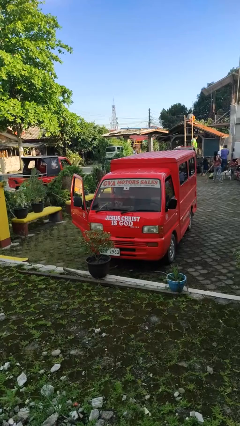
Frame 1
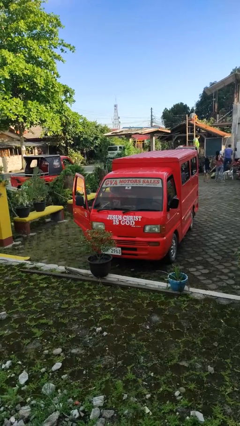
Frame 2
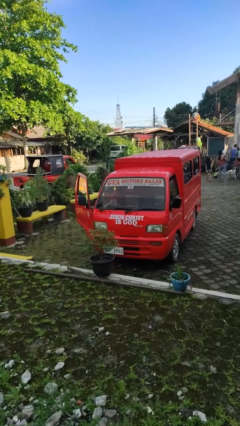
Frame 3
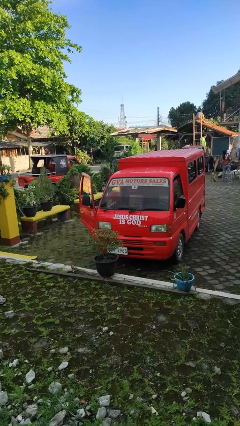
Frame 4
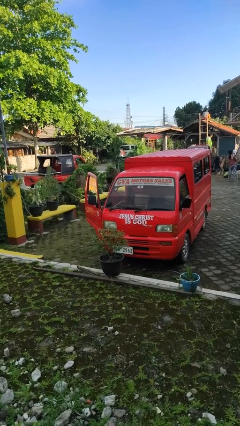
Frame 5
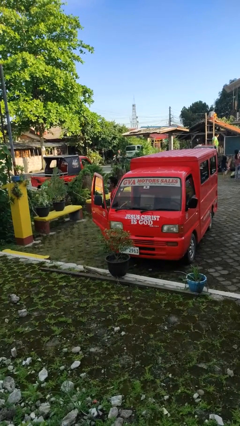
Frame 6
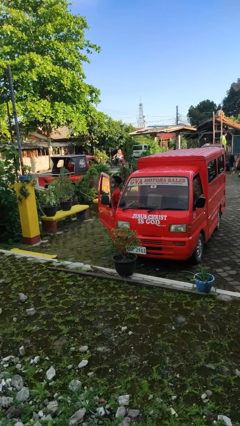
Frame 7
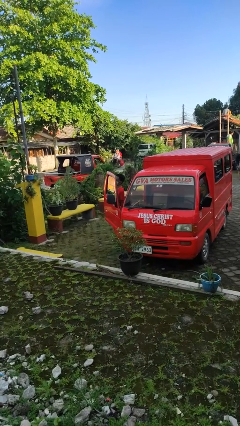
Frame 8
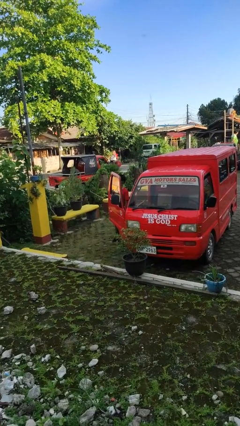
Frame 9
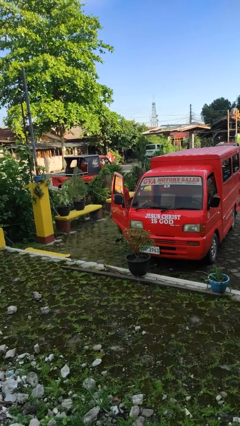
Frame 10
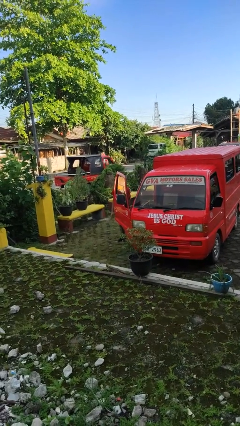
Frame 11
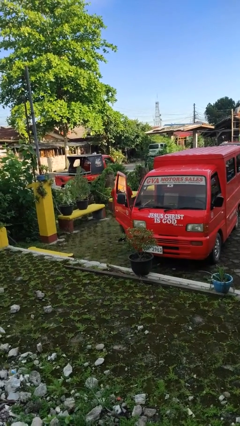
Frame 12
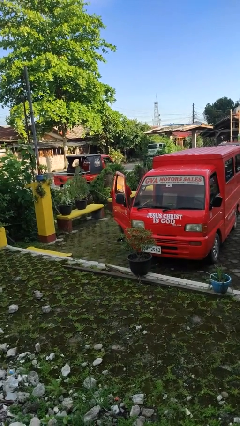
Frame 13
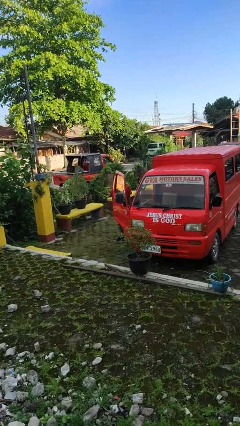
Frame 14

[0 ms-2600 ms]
person exits car

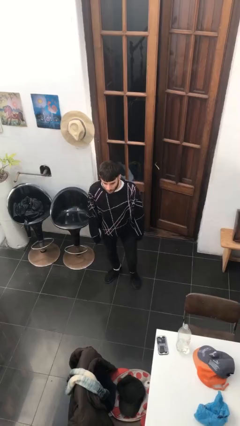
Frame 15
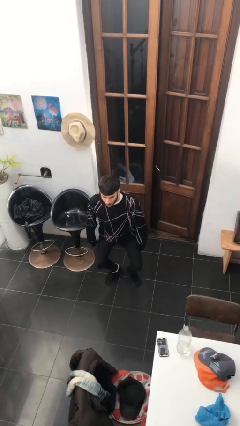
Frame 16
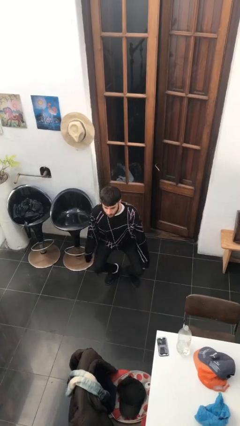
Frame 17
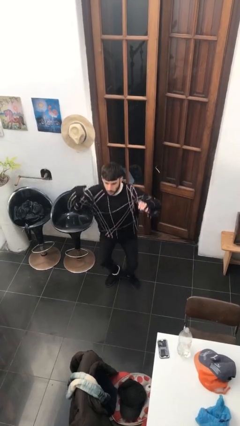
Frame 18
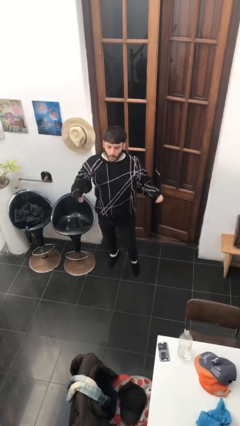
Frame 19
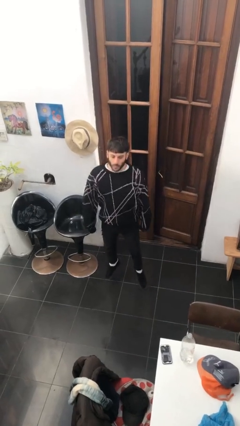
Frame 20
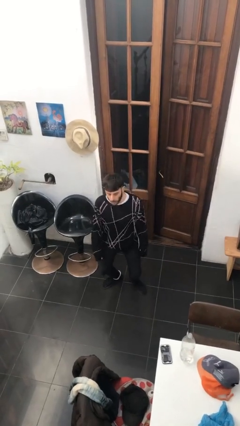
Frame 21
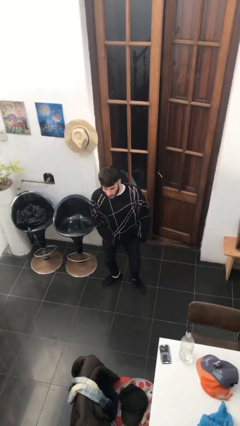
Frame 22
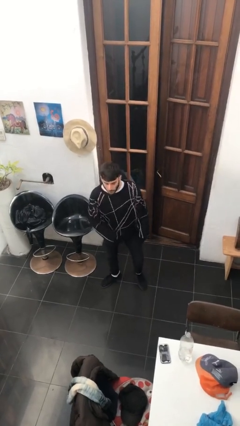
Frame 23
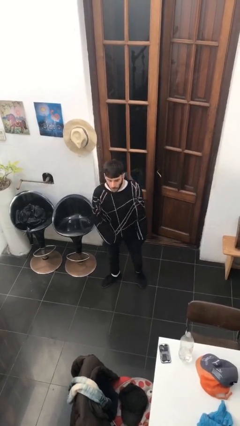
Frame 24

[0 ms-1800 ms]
person jumps

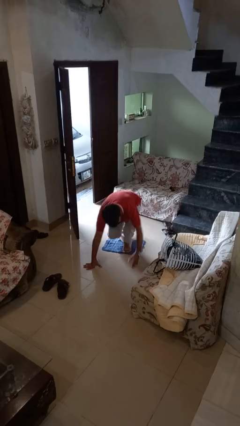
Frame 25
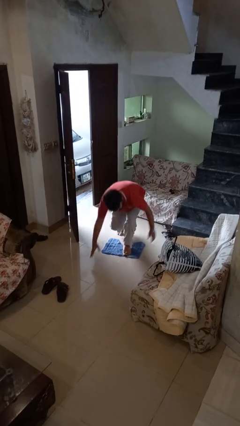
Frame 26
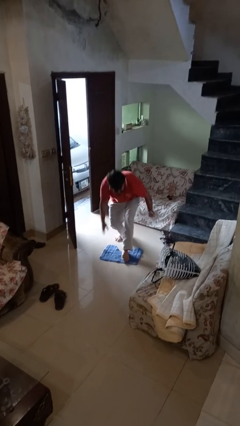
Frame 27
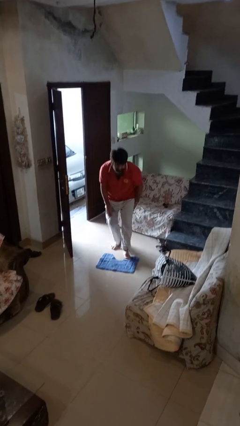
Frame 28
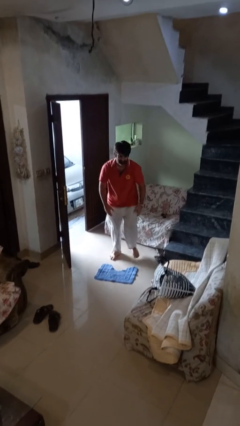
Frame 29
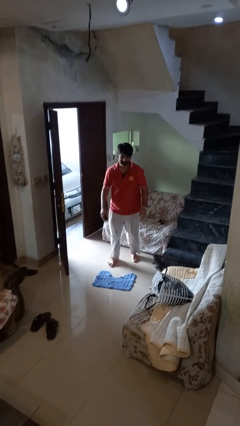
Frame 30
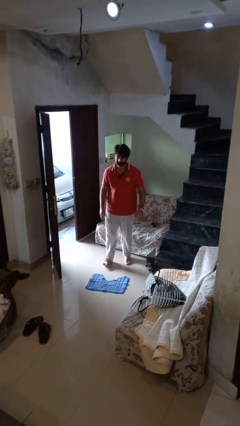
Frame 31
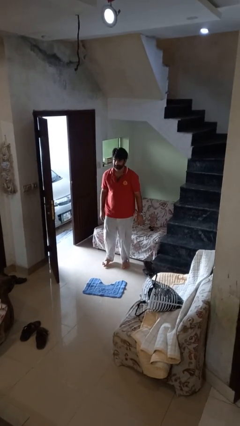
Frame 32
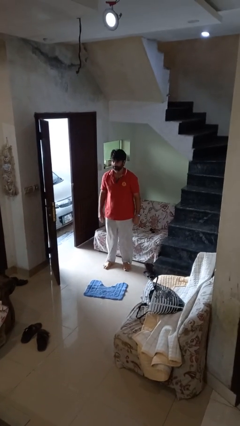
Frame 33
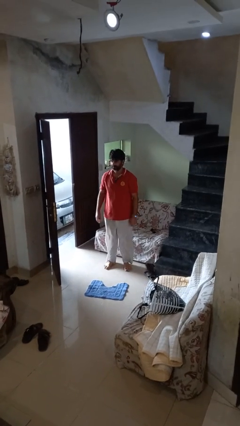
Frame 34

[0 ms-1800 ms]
person stands up from floor

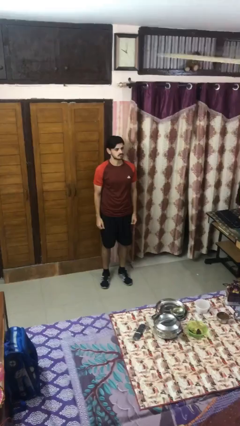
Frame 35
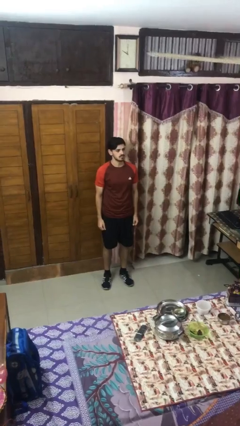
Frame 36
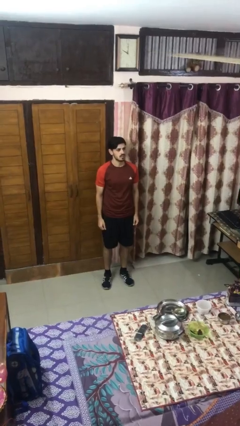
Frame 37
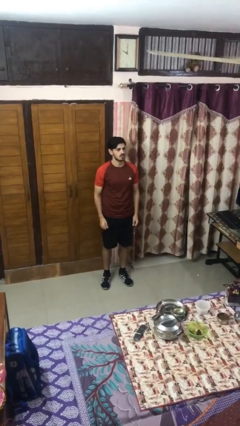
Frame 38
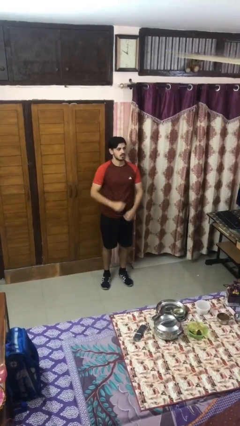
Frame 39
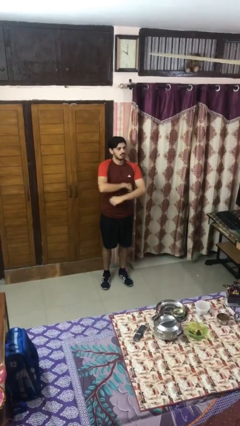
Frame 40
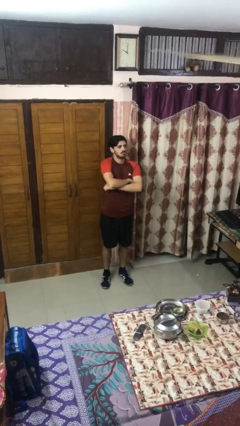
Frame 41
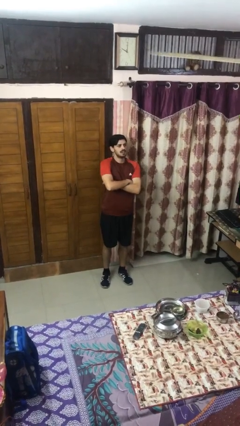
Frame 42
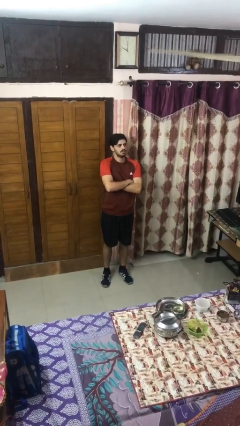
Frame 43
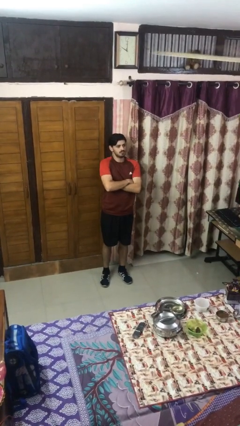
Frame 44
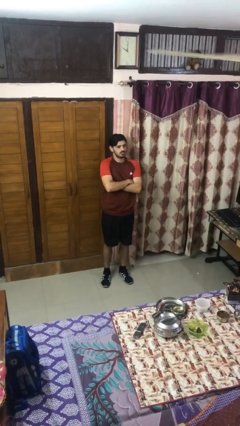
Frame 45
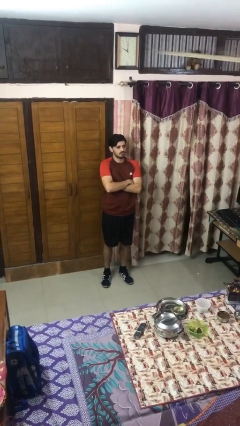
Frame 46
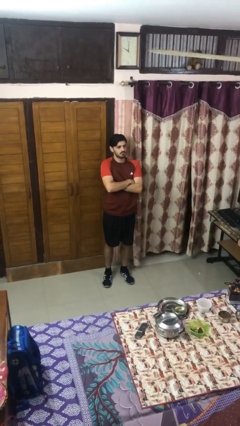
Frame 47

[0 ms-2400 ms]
person crosses arms

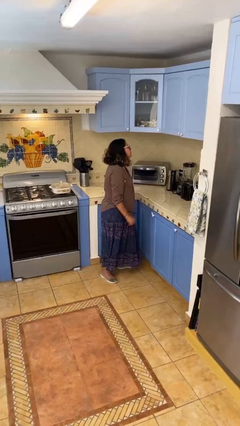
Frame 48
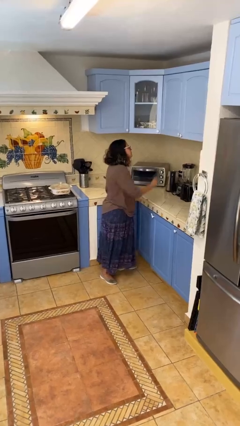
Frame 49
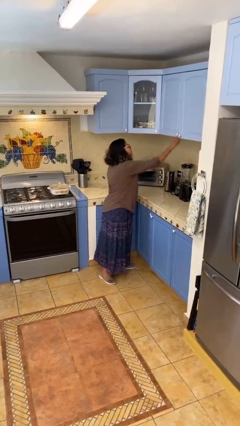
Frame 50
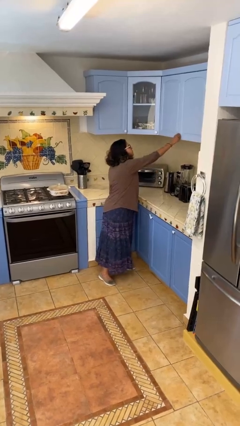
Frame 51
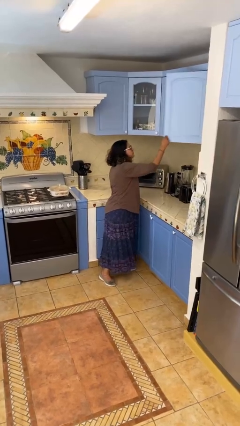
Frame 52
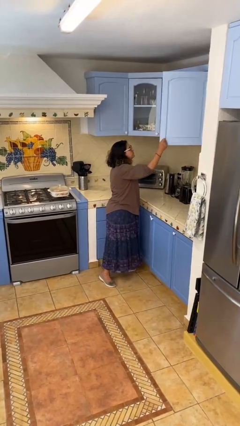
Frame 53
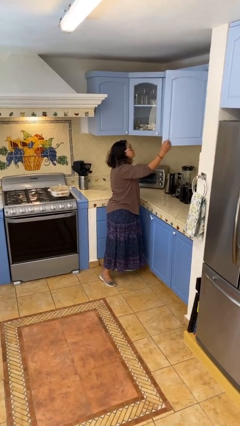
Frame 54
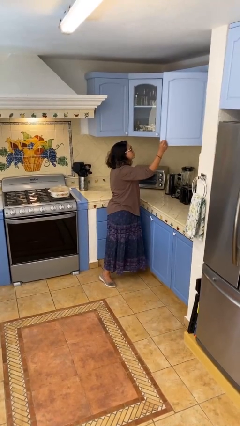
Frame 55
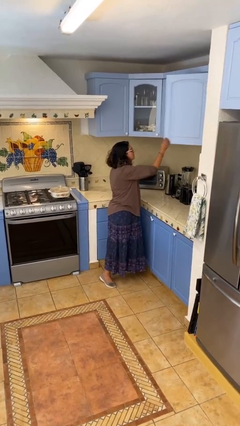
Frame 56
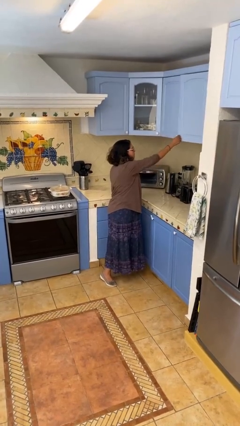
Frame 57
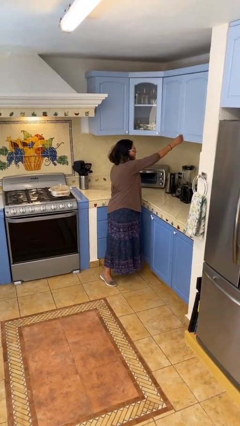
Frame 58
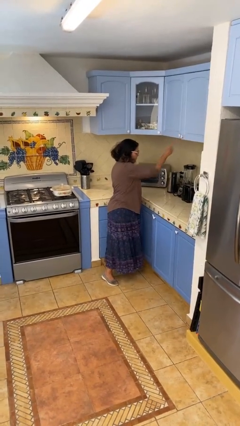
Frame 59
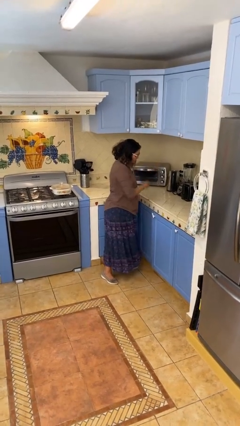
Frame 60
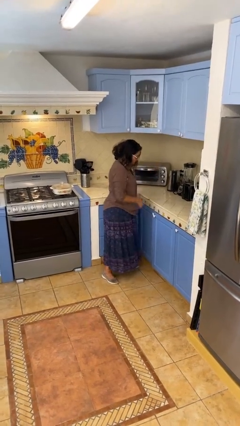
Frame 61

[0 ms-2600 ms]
person closes cabinet

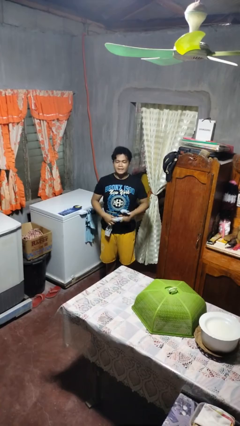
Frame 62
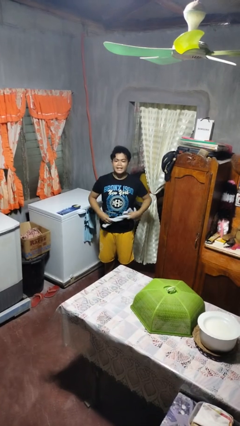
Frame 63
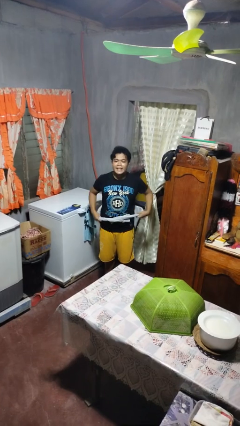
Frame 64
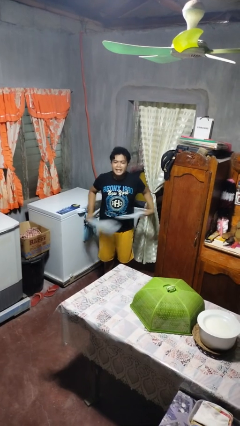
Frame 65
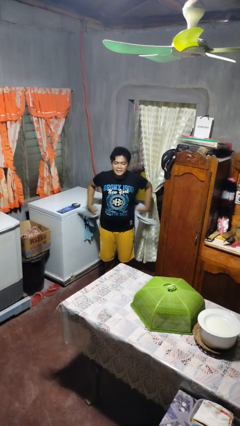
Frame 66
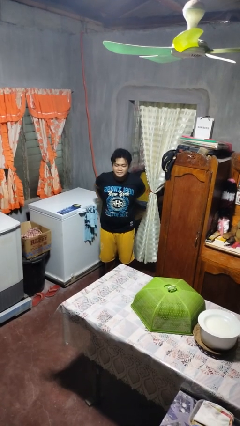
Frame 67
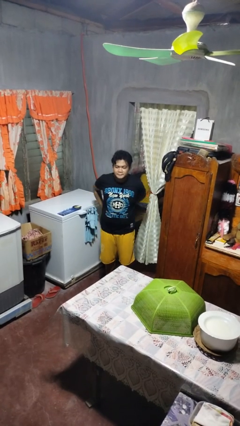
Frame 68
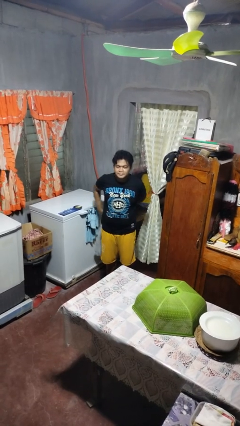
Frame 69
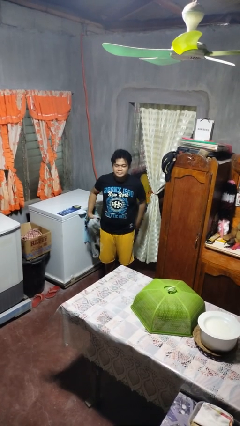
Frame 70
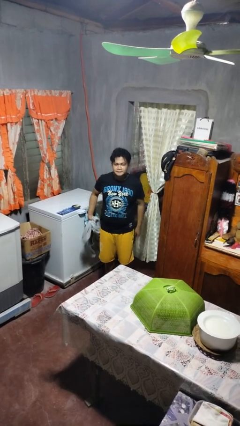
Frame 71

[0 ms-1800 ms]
person unties jacket around waist

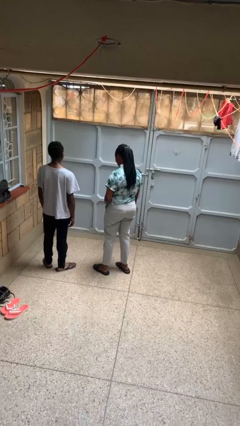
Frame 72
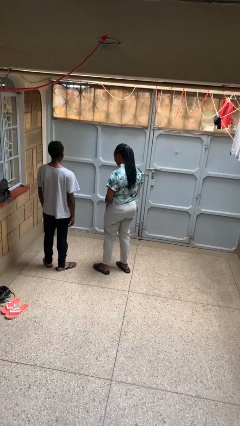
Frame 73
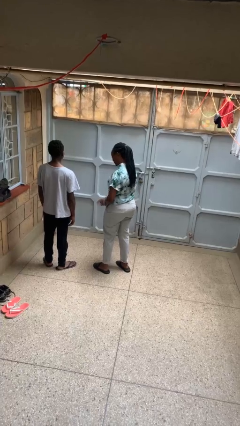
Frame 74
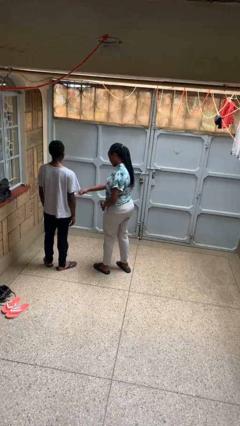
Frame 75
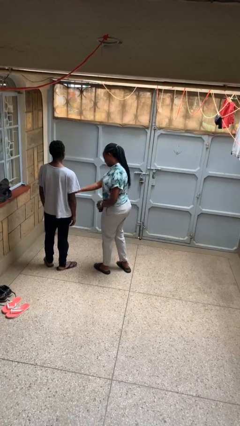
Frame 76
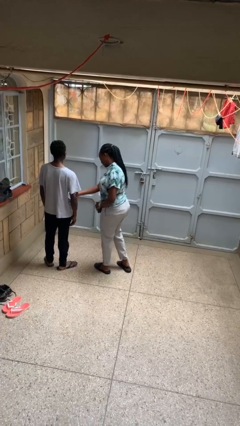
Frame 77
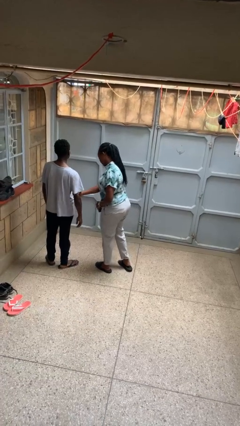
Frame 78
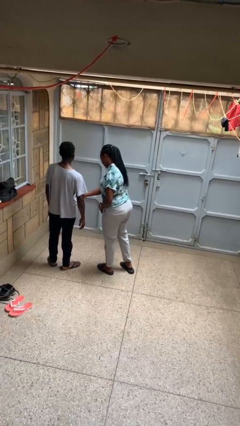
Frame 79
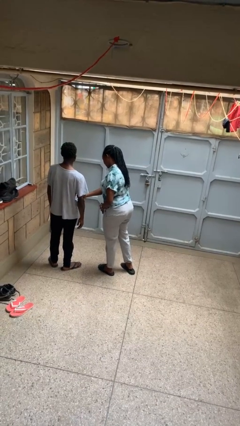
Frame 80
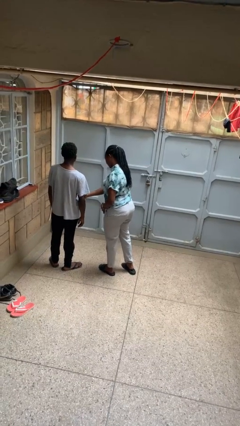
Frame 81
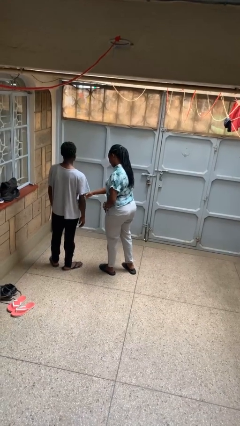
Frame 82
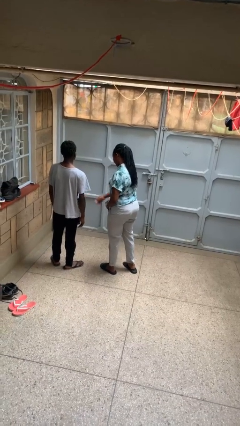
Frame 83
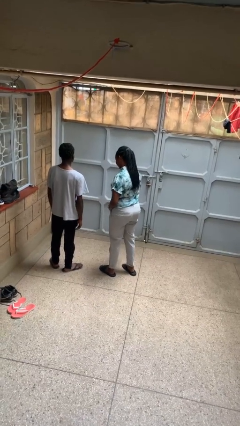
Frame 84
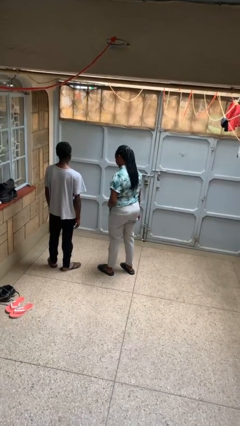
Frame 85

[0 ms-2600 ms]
person grabs person by bicep

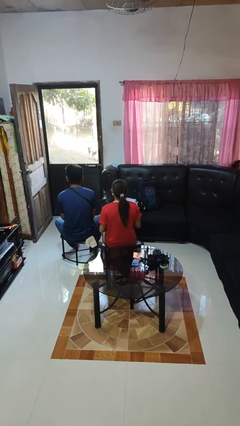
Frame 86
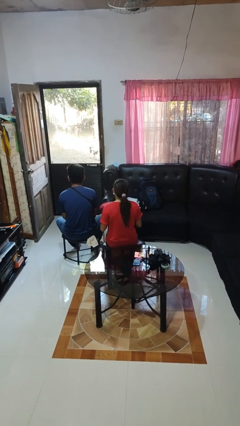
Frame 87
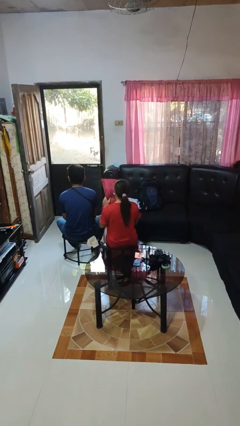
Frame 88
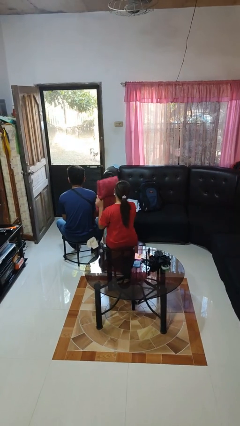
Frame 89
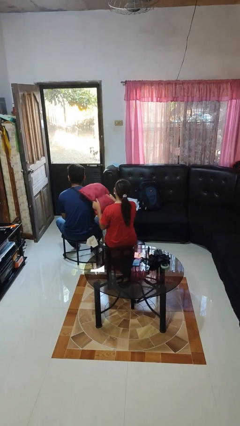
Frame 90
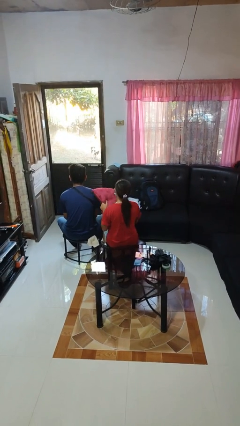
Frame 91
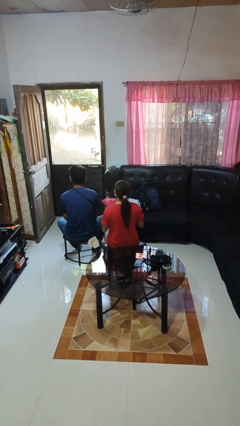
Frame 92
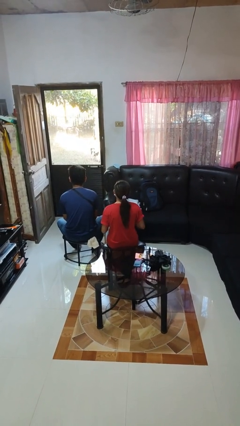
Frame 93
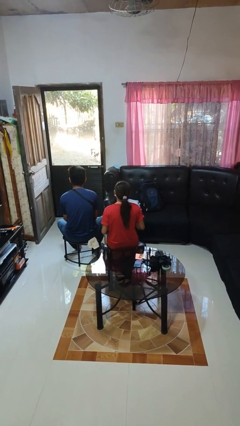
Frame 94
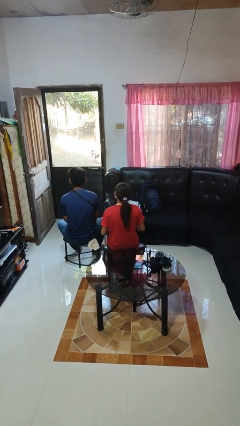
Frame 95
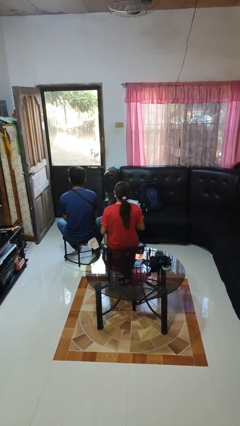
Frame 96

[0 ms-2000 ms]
person hits person with pillow
